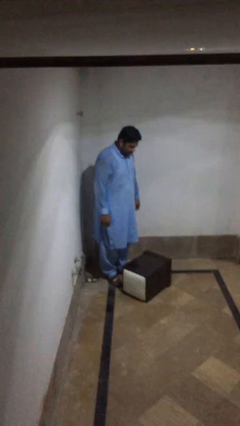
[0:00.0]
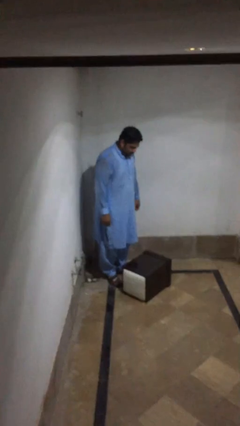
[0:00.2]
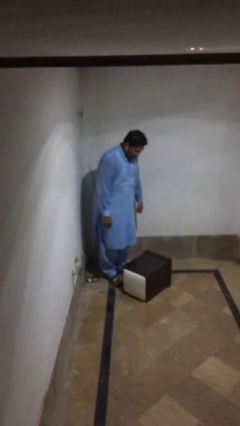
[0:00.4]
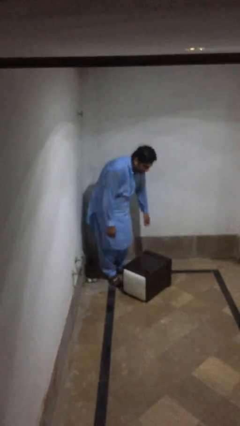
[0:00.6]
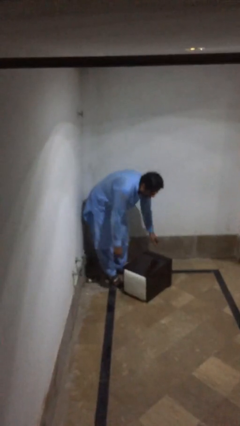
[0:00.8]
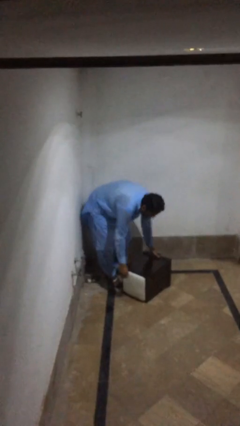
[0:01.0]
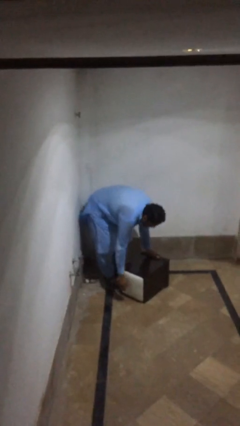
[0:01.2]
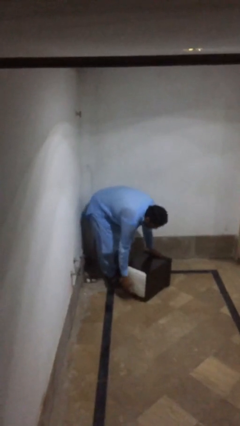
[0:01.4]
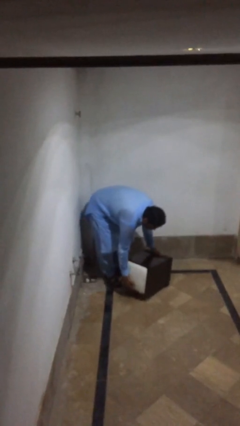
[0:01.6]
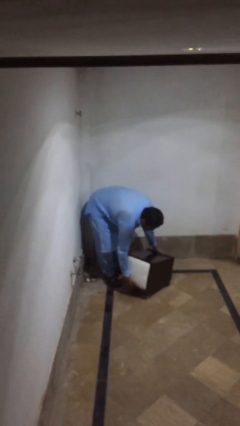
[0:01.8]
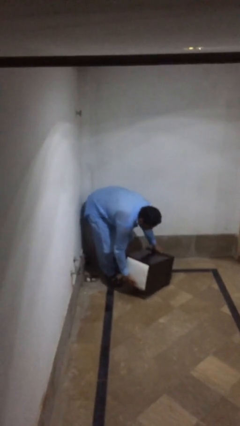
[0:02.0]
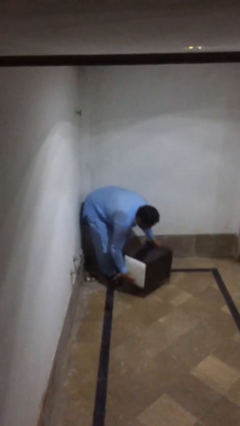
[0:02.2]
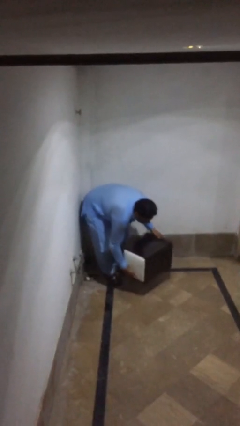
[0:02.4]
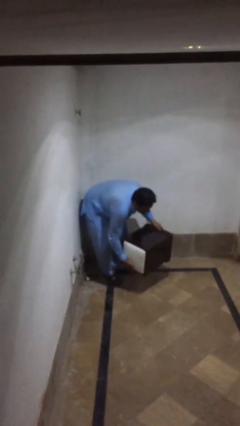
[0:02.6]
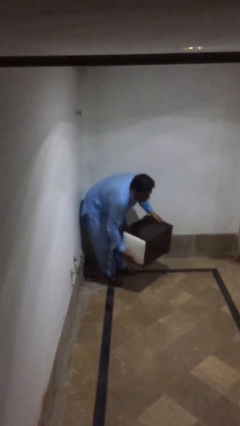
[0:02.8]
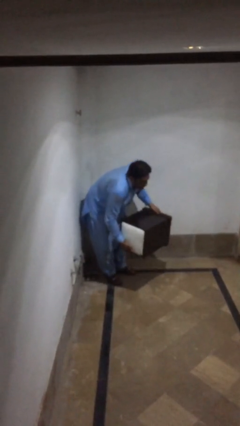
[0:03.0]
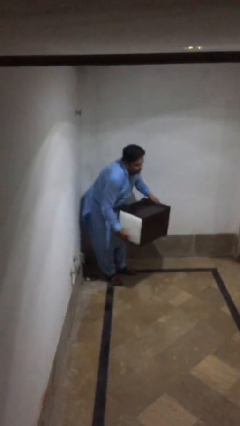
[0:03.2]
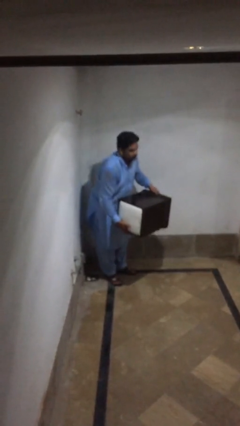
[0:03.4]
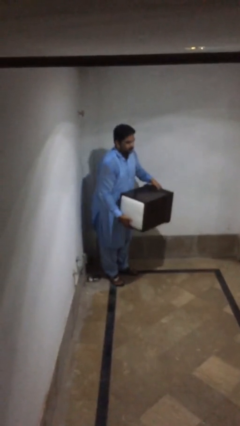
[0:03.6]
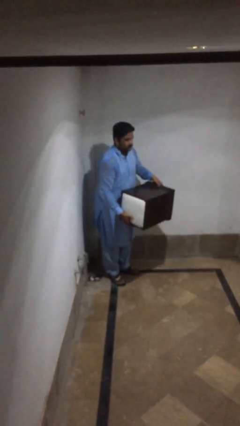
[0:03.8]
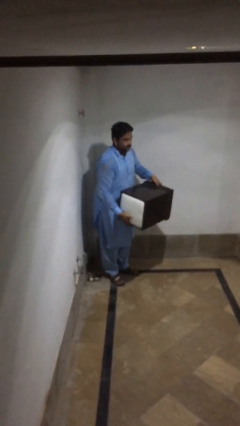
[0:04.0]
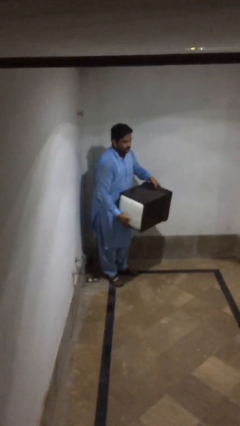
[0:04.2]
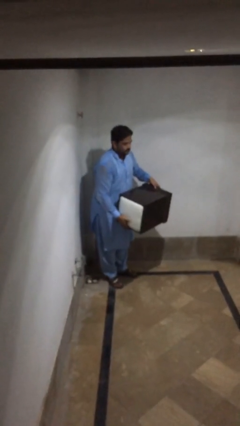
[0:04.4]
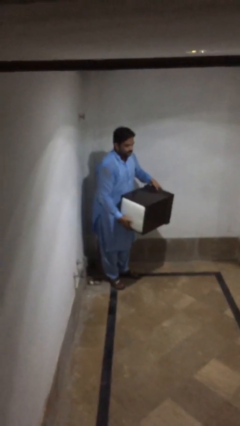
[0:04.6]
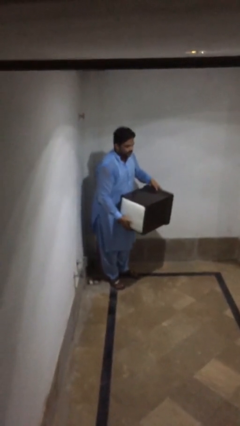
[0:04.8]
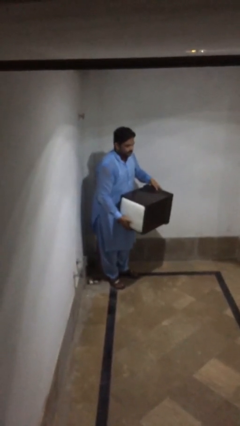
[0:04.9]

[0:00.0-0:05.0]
person picks up object from floor

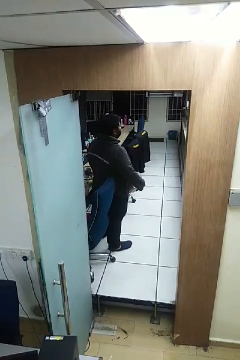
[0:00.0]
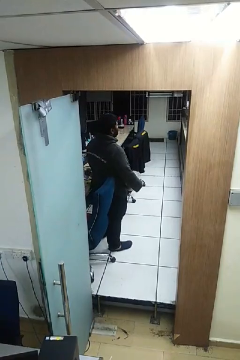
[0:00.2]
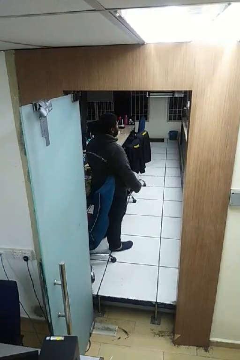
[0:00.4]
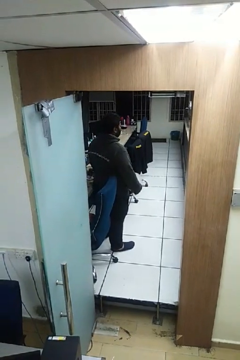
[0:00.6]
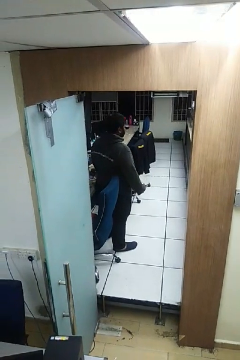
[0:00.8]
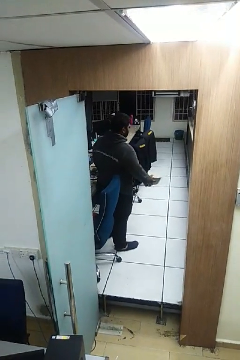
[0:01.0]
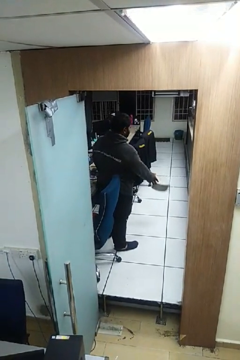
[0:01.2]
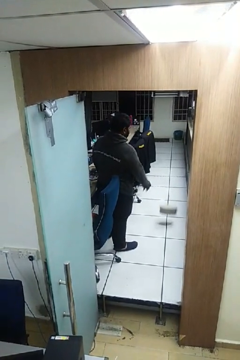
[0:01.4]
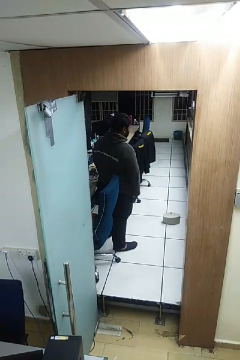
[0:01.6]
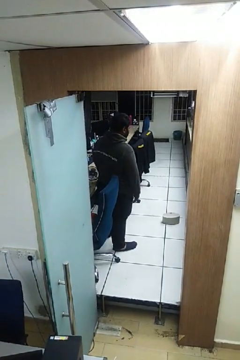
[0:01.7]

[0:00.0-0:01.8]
person throws object to ground

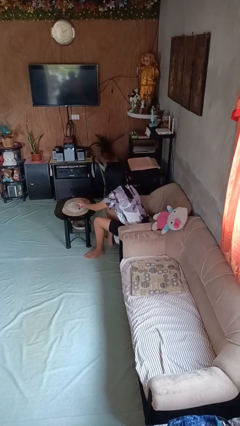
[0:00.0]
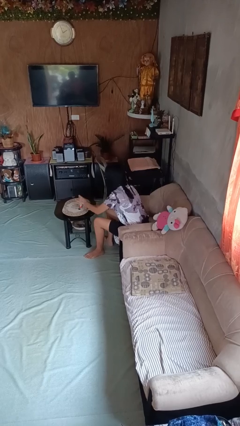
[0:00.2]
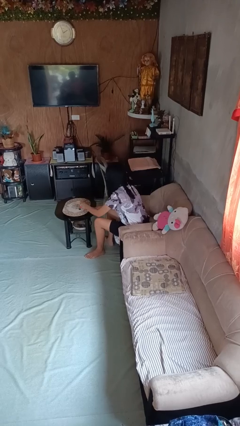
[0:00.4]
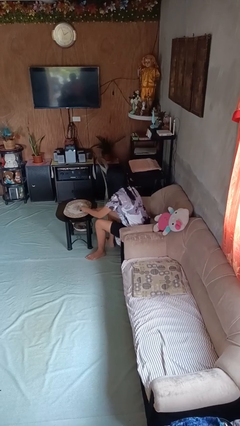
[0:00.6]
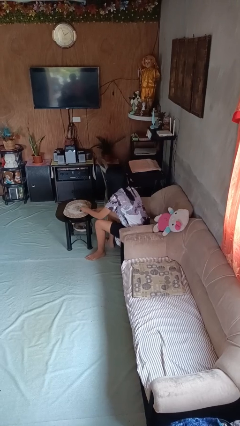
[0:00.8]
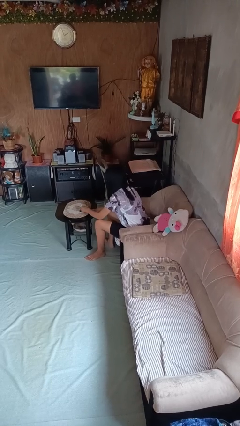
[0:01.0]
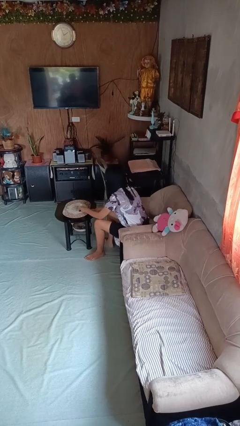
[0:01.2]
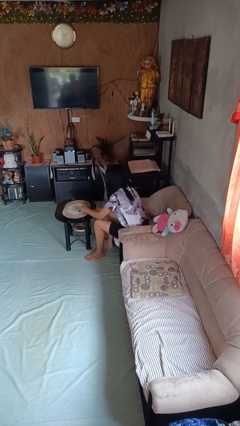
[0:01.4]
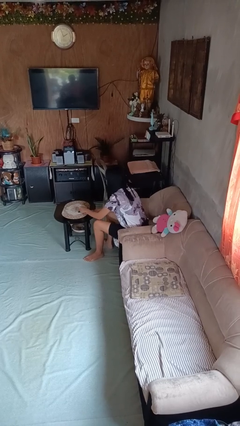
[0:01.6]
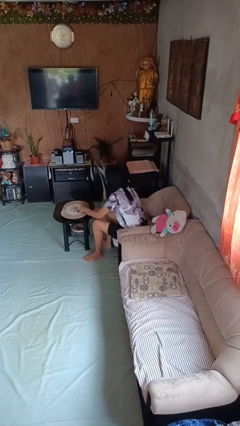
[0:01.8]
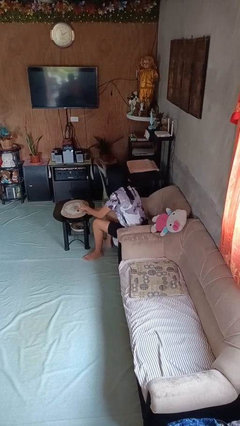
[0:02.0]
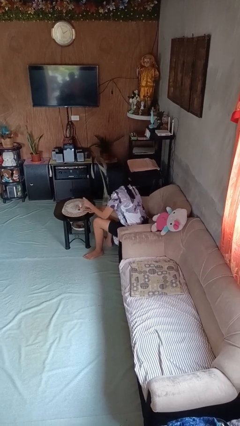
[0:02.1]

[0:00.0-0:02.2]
person paints fingernails

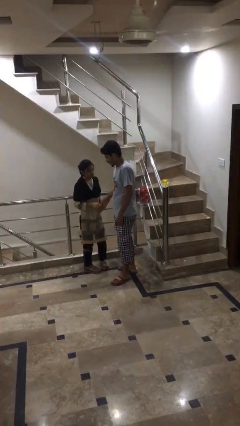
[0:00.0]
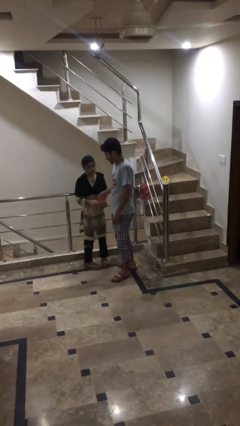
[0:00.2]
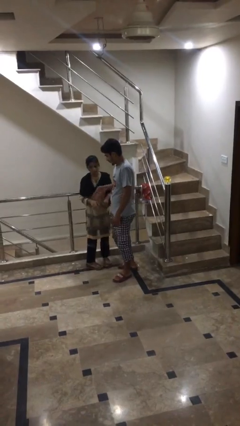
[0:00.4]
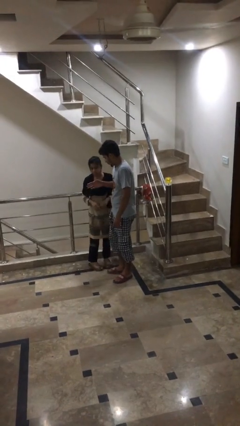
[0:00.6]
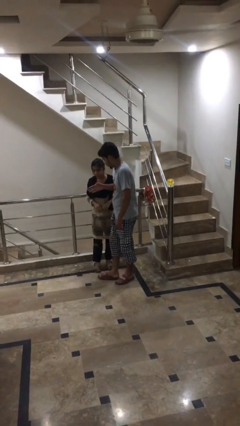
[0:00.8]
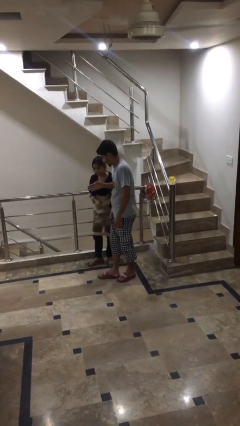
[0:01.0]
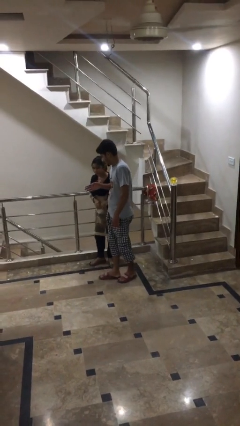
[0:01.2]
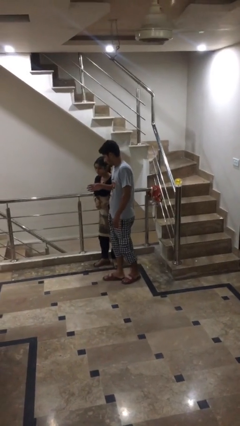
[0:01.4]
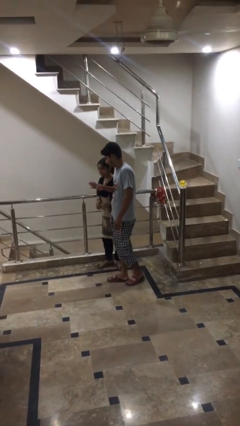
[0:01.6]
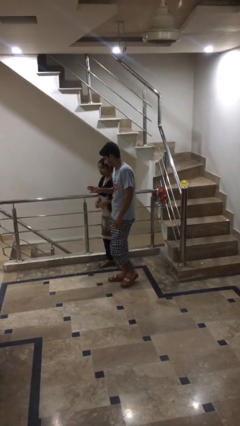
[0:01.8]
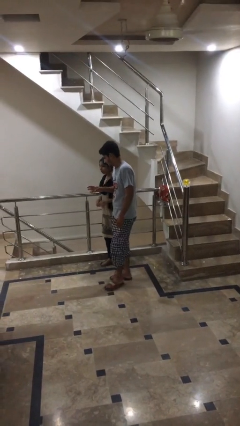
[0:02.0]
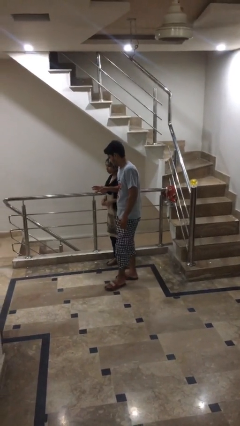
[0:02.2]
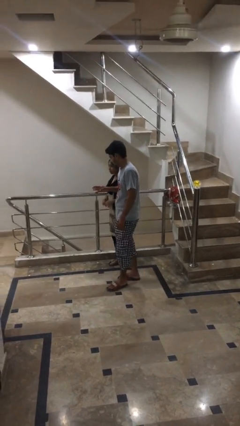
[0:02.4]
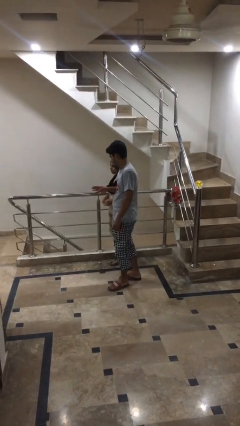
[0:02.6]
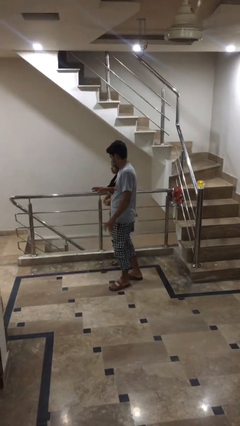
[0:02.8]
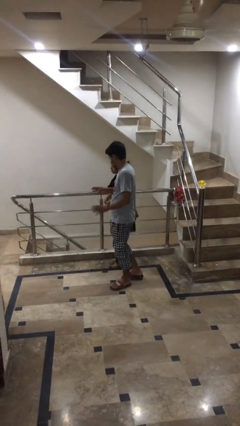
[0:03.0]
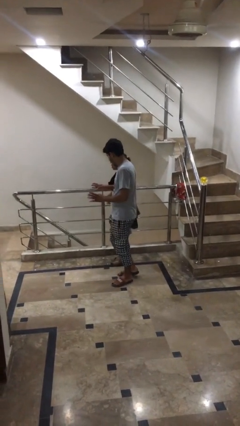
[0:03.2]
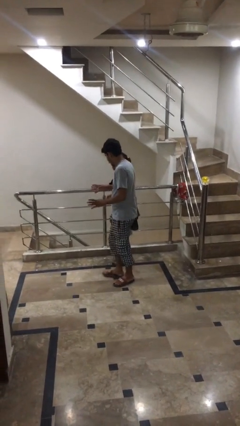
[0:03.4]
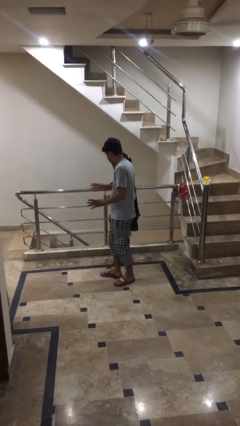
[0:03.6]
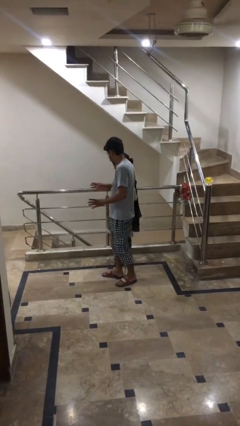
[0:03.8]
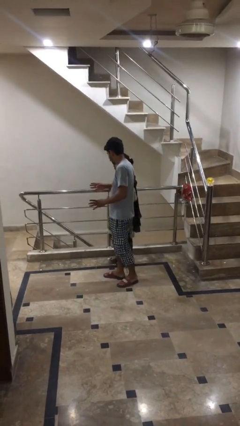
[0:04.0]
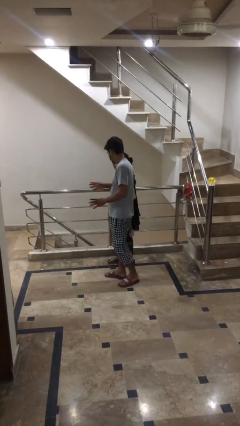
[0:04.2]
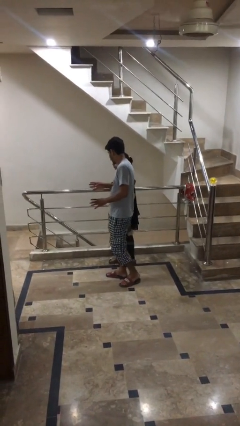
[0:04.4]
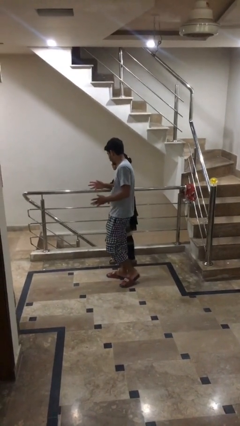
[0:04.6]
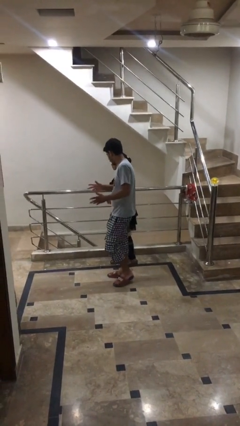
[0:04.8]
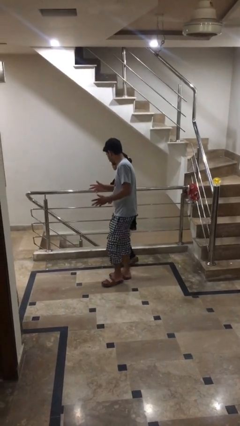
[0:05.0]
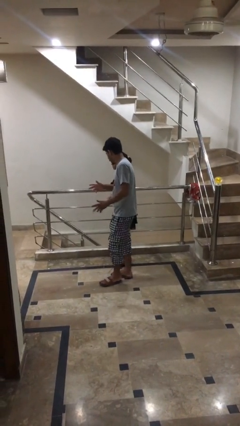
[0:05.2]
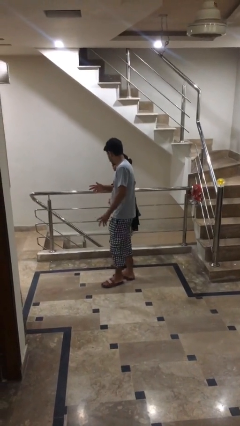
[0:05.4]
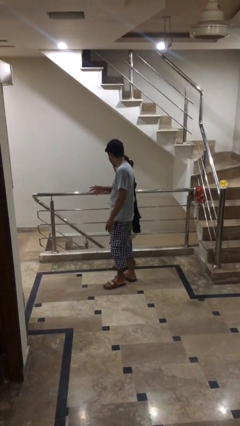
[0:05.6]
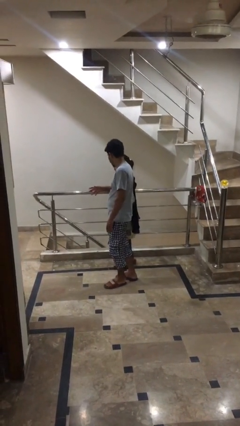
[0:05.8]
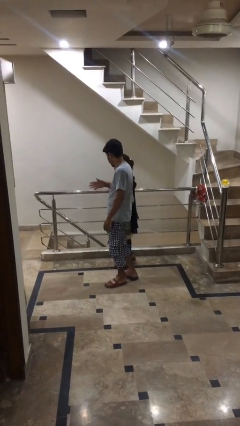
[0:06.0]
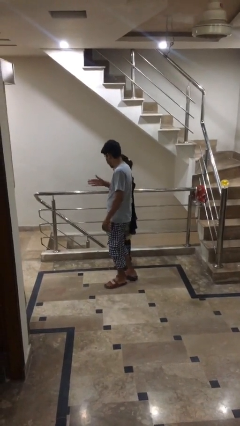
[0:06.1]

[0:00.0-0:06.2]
person talks to person

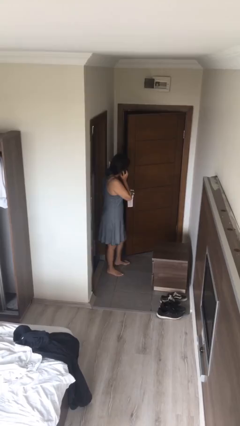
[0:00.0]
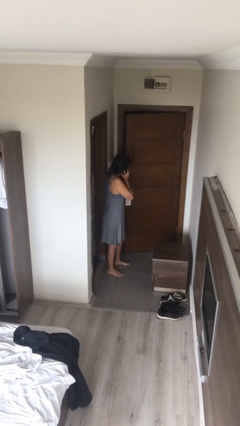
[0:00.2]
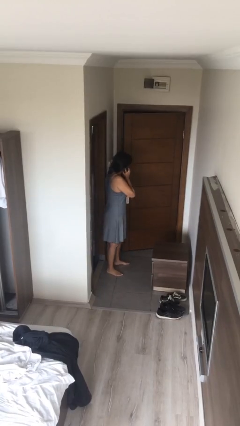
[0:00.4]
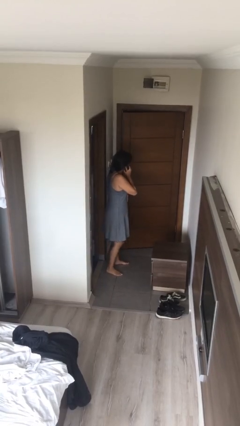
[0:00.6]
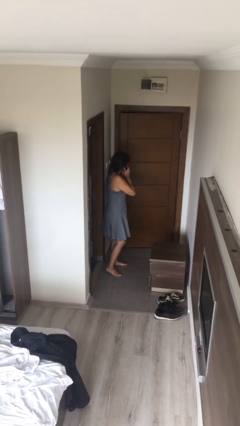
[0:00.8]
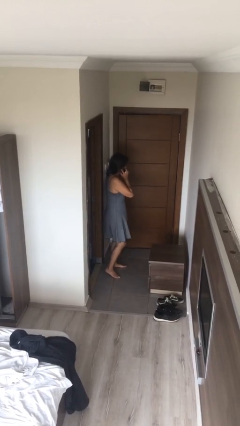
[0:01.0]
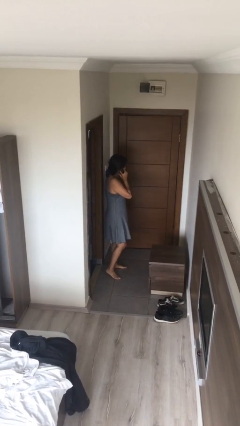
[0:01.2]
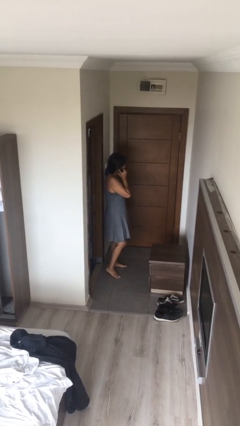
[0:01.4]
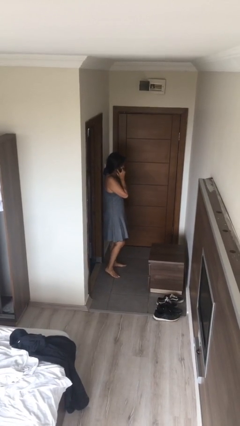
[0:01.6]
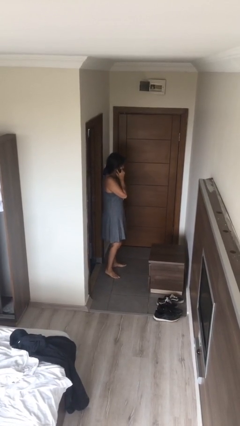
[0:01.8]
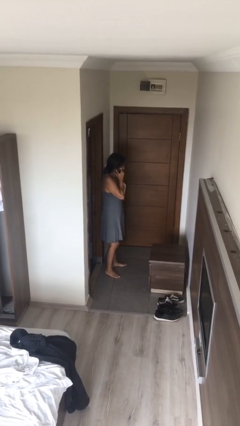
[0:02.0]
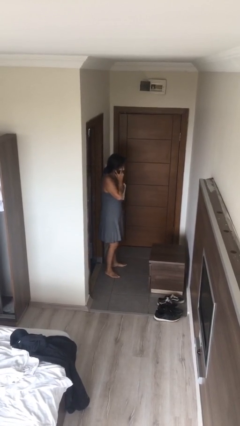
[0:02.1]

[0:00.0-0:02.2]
person closes facility door
